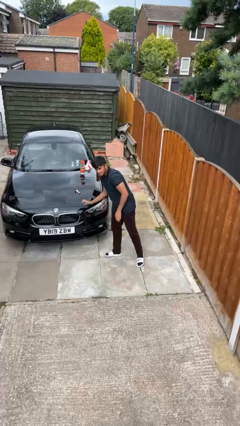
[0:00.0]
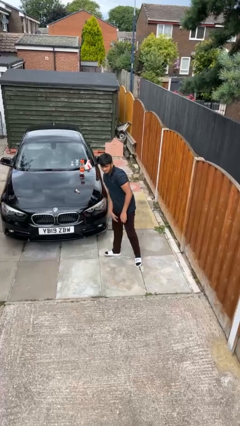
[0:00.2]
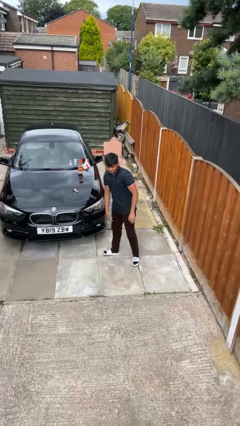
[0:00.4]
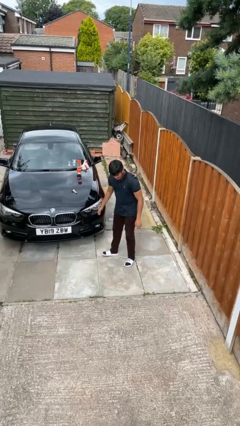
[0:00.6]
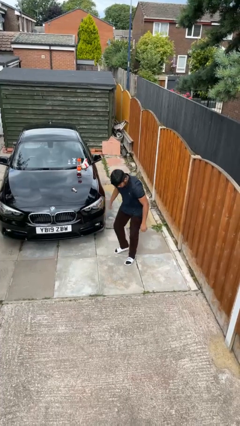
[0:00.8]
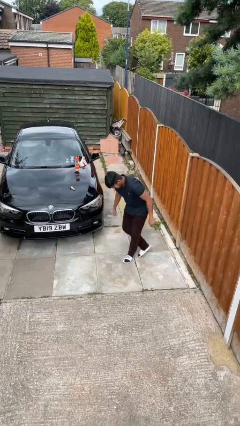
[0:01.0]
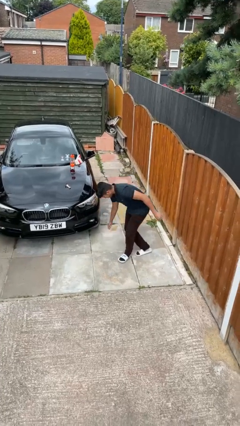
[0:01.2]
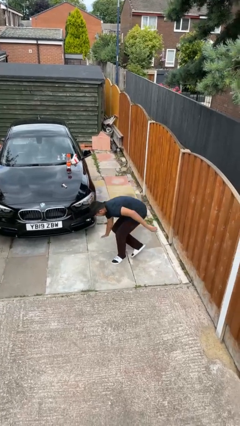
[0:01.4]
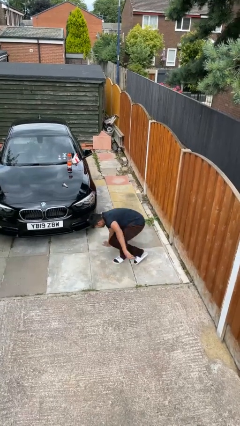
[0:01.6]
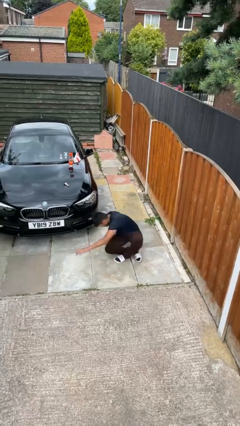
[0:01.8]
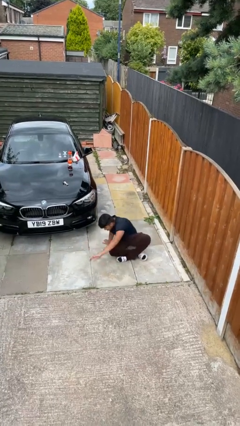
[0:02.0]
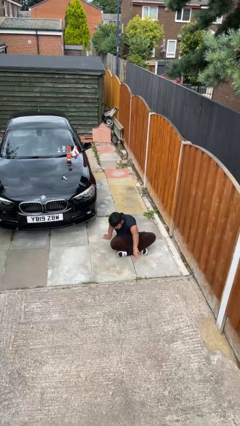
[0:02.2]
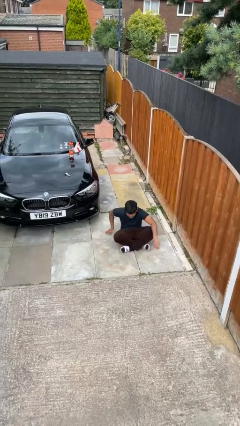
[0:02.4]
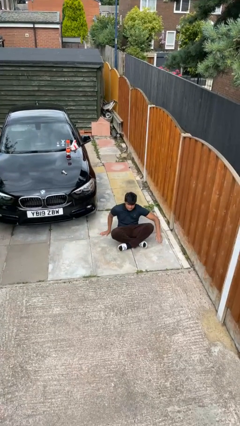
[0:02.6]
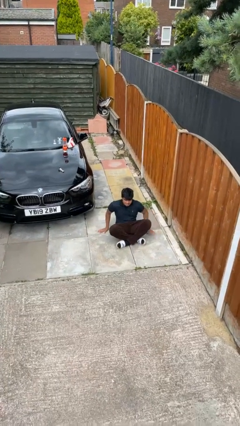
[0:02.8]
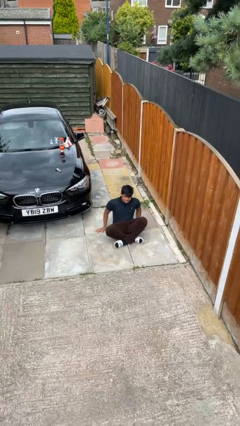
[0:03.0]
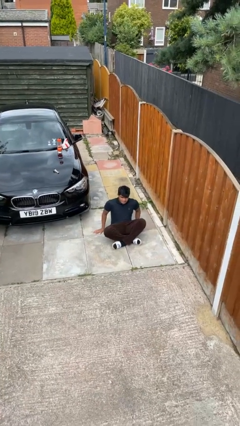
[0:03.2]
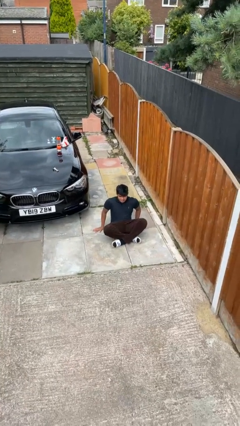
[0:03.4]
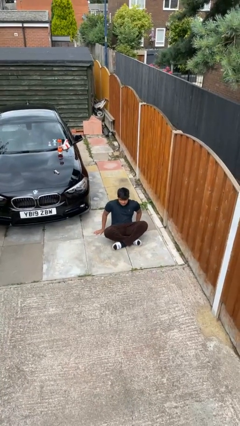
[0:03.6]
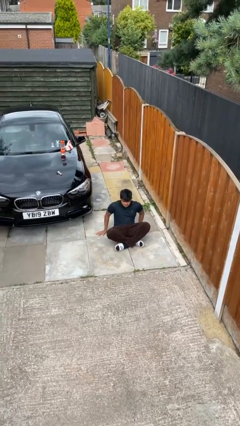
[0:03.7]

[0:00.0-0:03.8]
person sits crisscross

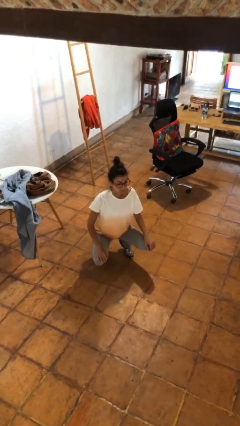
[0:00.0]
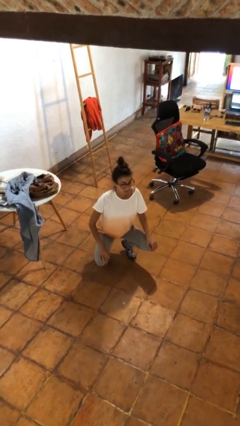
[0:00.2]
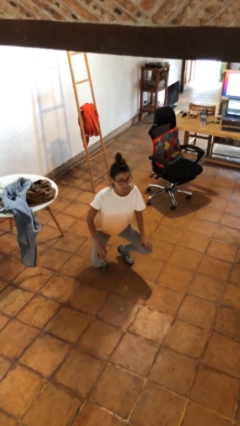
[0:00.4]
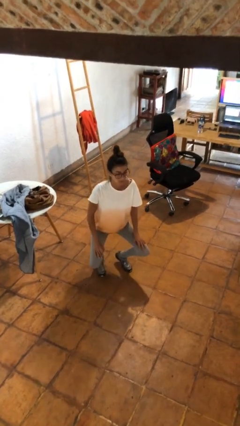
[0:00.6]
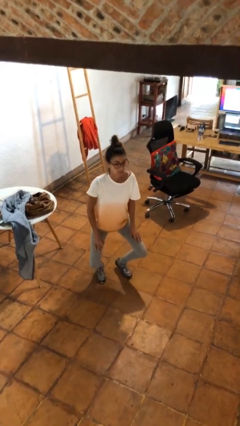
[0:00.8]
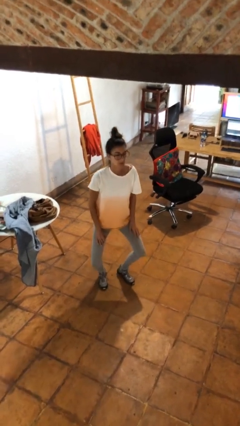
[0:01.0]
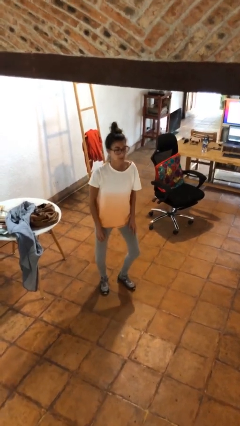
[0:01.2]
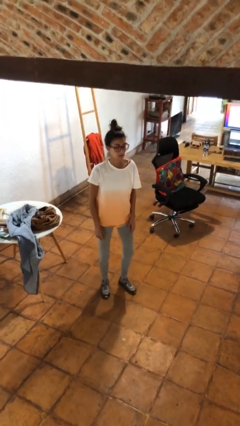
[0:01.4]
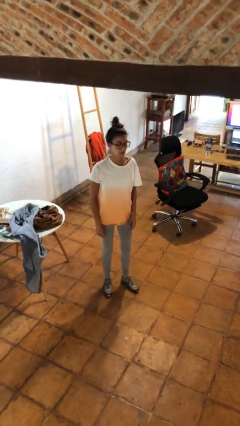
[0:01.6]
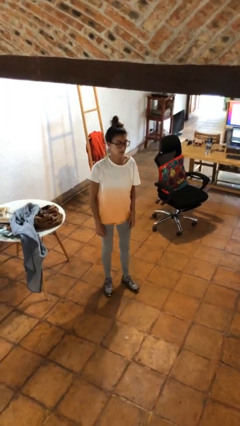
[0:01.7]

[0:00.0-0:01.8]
person stands up

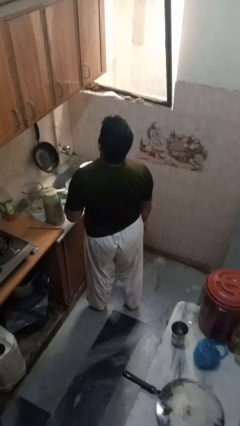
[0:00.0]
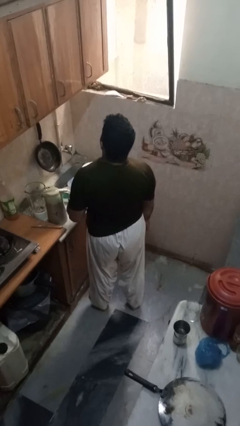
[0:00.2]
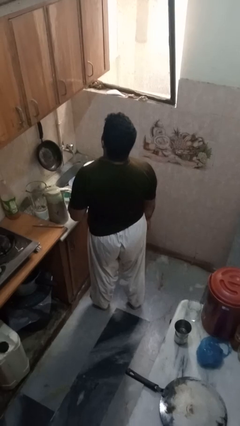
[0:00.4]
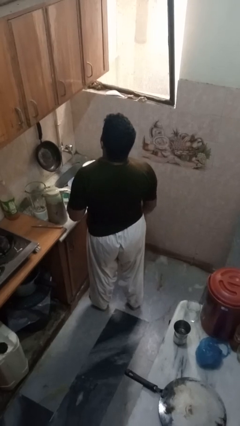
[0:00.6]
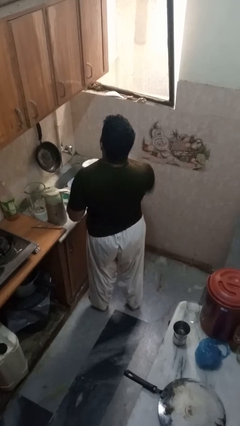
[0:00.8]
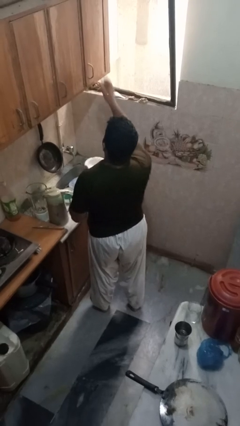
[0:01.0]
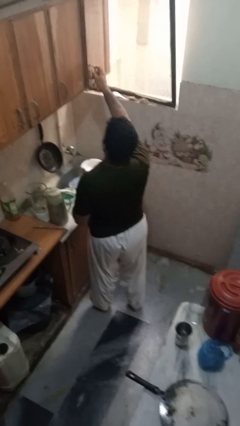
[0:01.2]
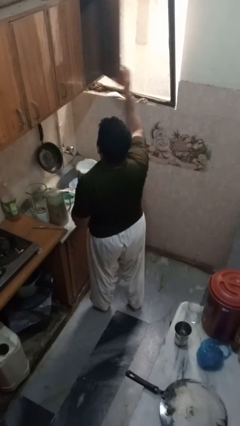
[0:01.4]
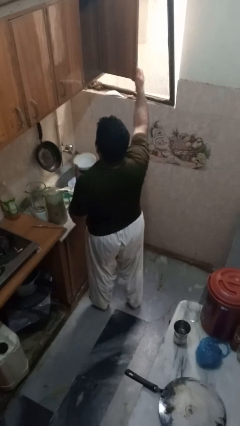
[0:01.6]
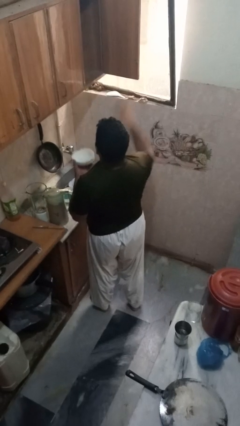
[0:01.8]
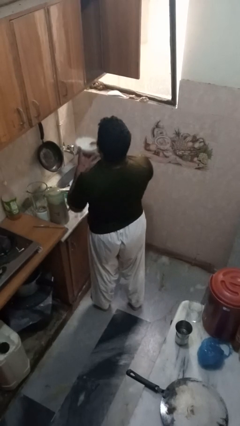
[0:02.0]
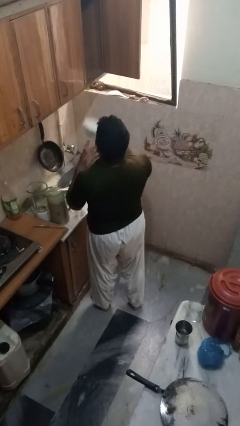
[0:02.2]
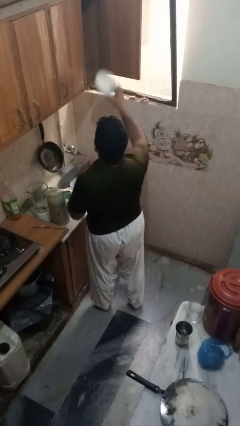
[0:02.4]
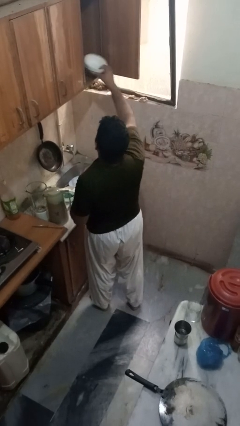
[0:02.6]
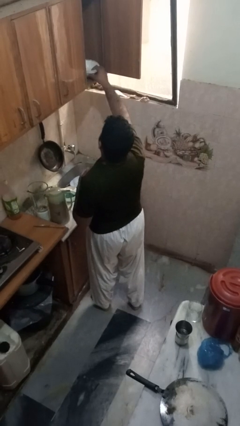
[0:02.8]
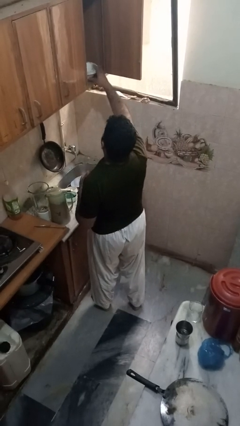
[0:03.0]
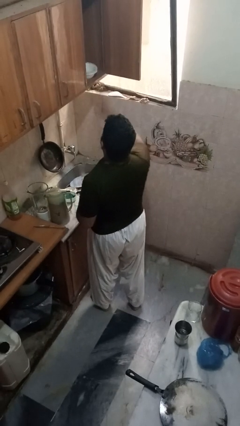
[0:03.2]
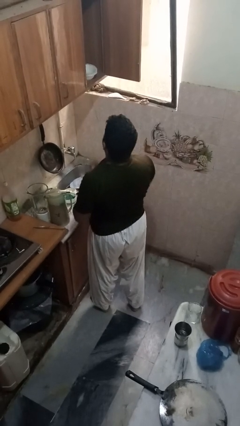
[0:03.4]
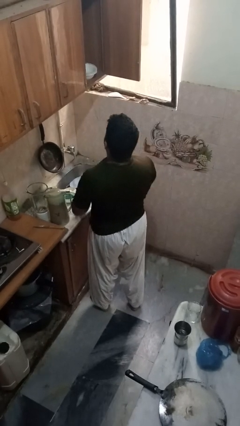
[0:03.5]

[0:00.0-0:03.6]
person puts object in cabinet

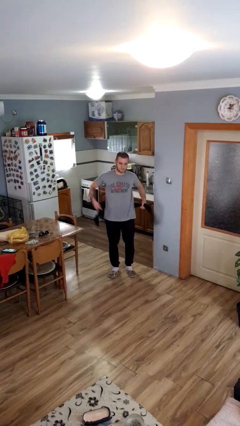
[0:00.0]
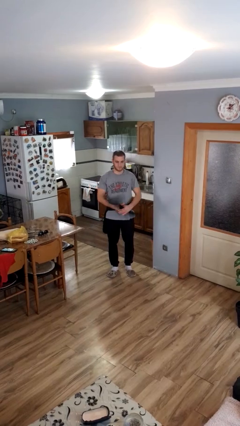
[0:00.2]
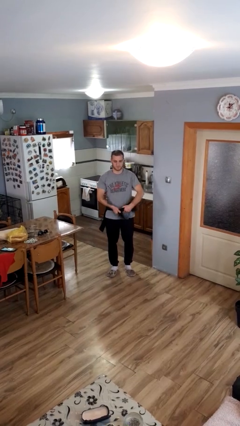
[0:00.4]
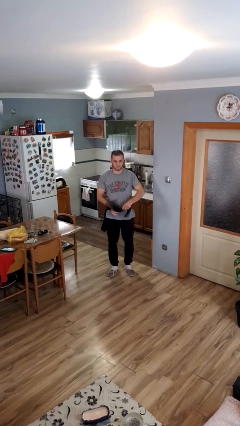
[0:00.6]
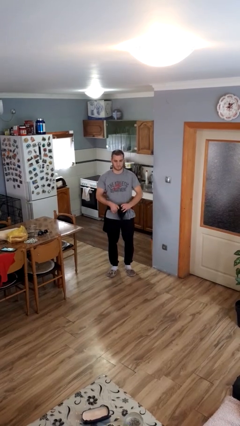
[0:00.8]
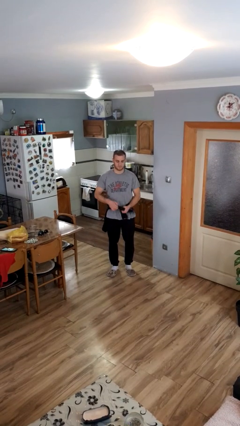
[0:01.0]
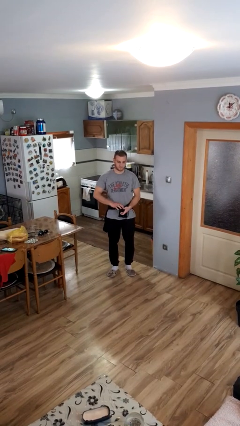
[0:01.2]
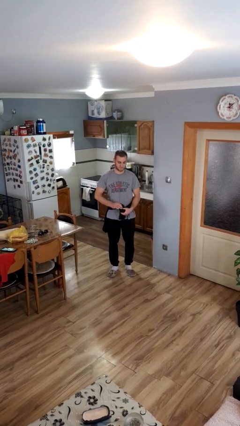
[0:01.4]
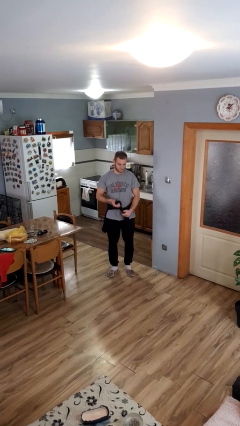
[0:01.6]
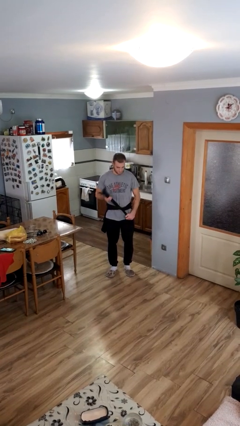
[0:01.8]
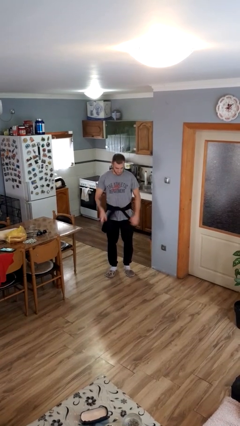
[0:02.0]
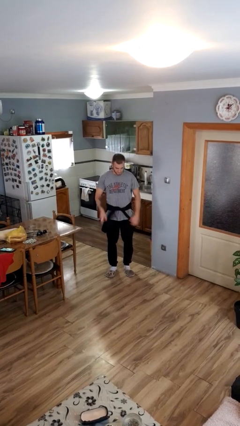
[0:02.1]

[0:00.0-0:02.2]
person ties jacket around waist

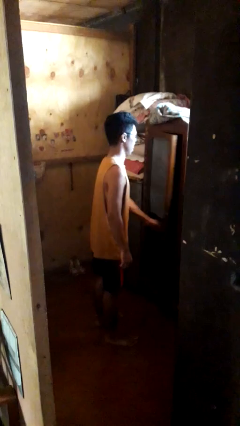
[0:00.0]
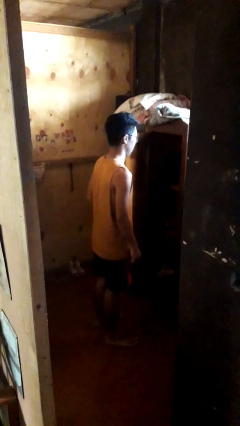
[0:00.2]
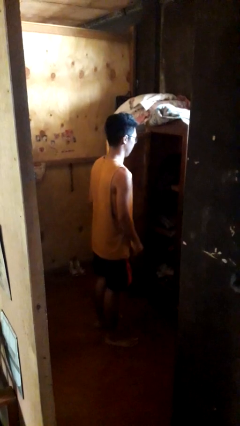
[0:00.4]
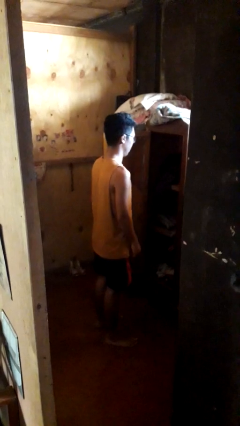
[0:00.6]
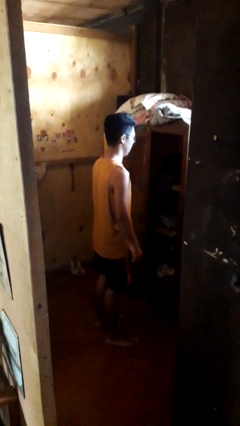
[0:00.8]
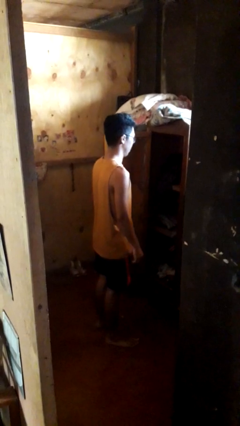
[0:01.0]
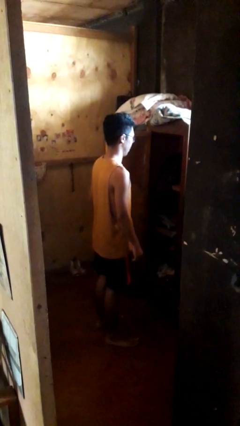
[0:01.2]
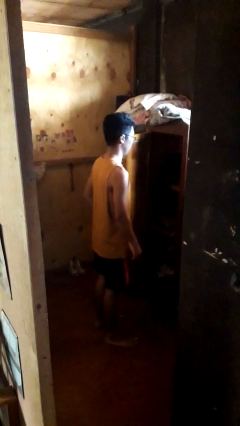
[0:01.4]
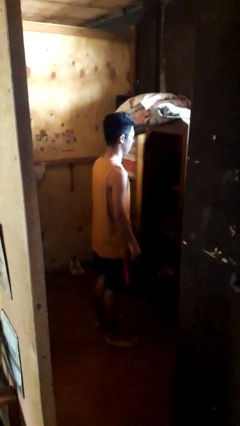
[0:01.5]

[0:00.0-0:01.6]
person opens closet door

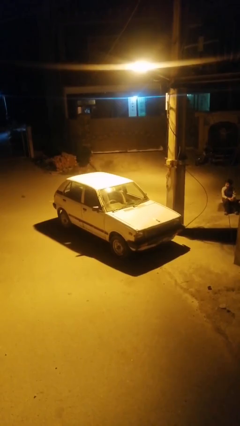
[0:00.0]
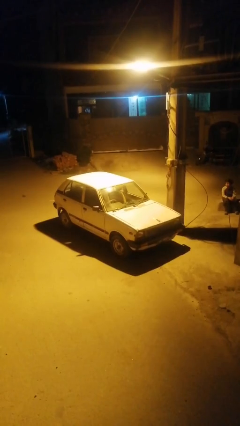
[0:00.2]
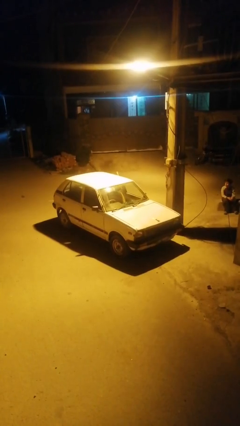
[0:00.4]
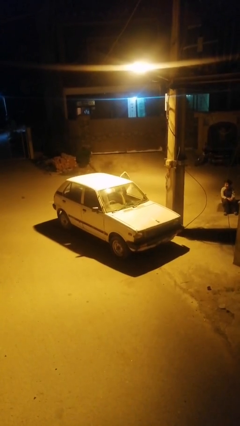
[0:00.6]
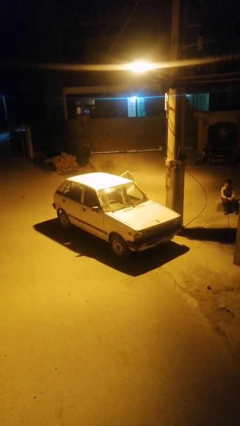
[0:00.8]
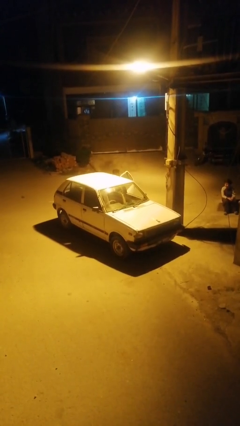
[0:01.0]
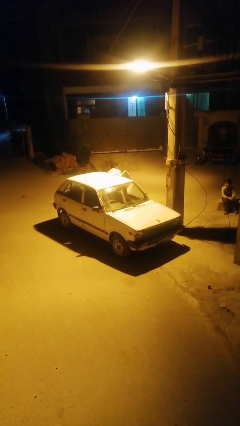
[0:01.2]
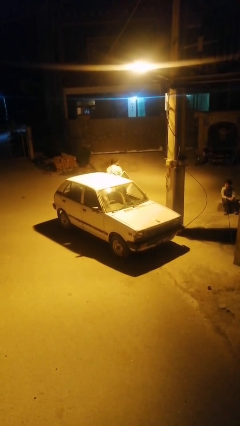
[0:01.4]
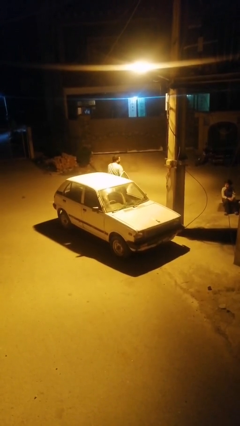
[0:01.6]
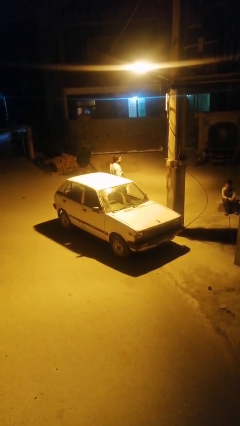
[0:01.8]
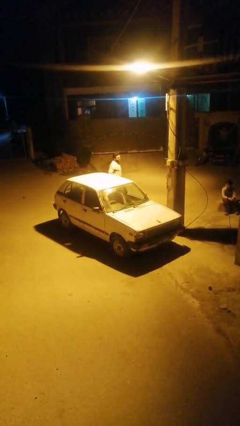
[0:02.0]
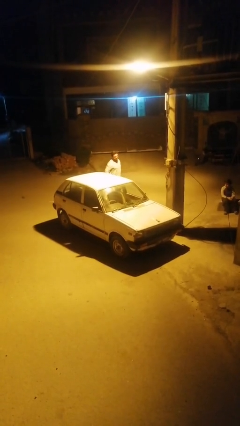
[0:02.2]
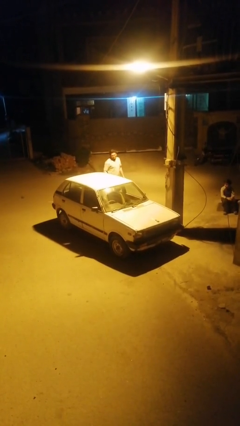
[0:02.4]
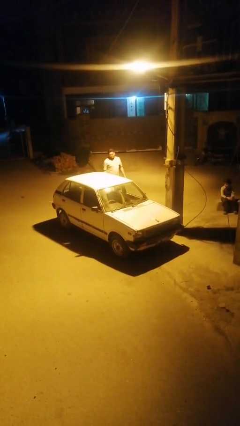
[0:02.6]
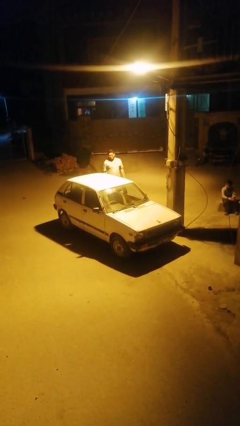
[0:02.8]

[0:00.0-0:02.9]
car drops off person

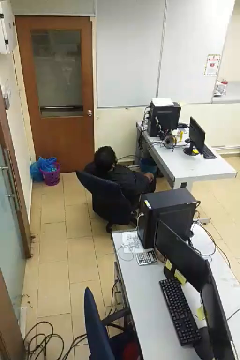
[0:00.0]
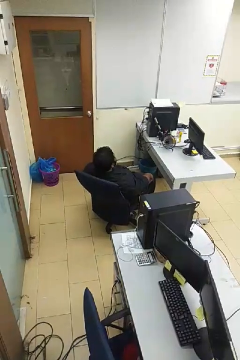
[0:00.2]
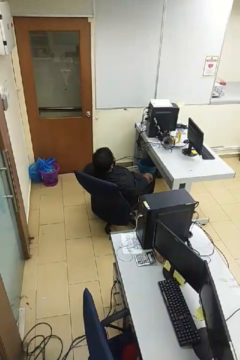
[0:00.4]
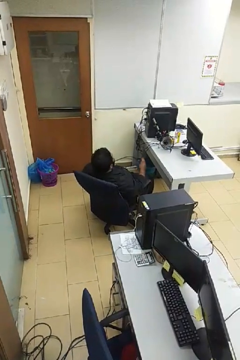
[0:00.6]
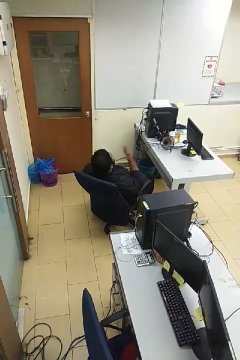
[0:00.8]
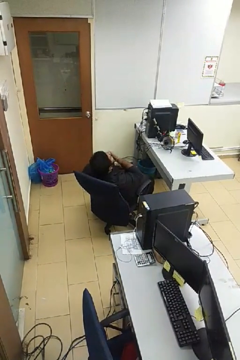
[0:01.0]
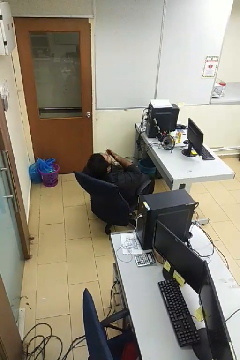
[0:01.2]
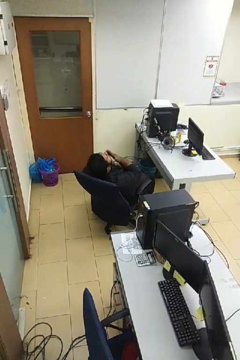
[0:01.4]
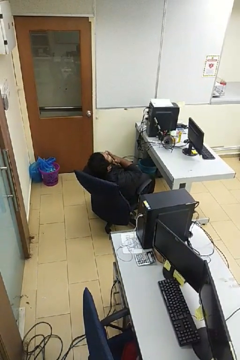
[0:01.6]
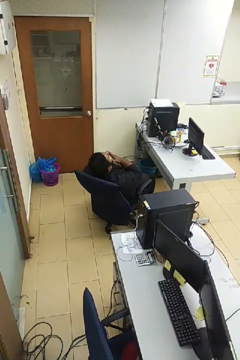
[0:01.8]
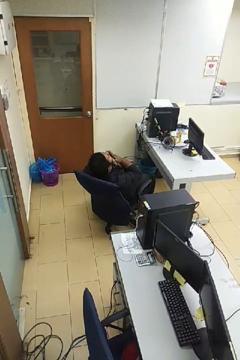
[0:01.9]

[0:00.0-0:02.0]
person yawns
